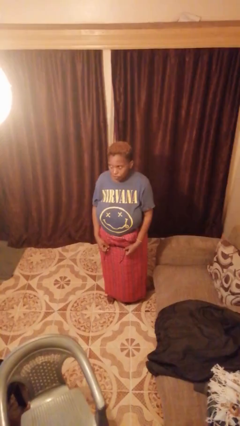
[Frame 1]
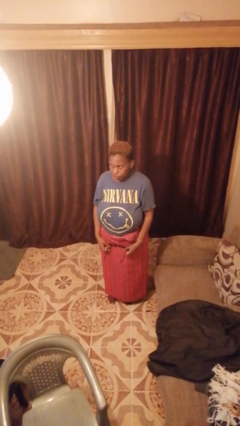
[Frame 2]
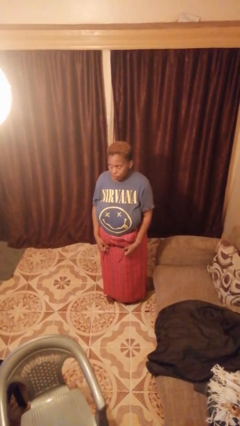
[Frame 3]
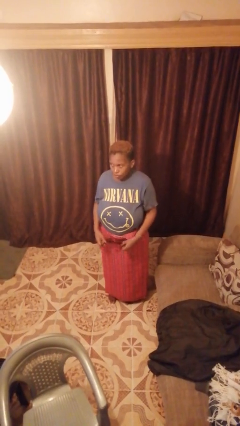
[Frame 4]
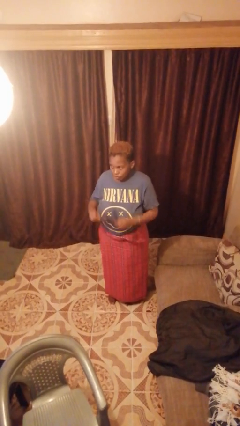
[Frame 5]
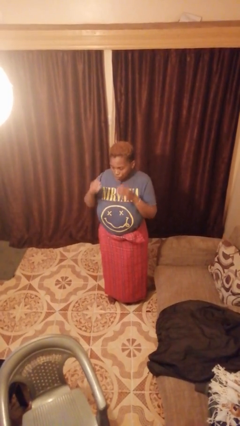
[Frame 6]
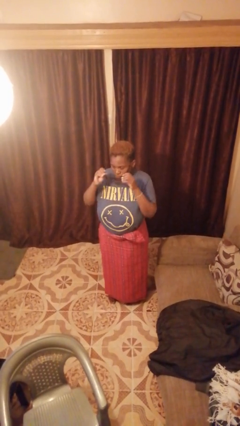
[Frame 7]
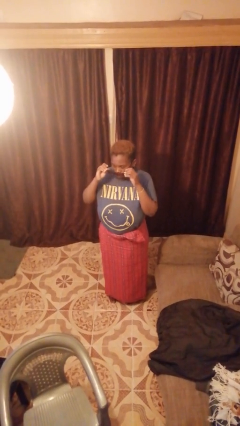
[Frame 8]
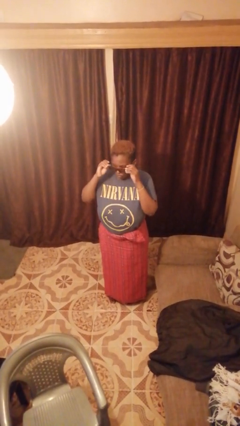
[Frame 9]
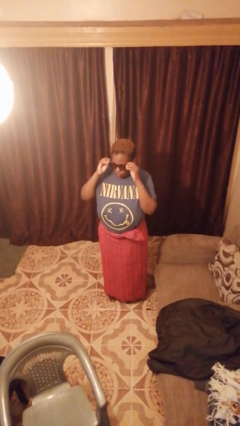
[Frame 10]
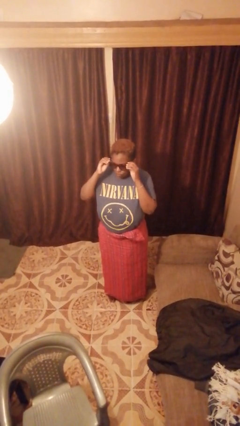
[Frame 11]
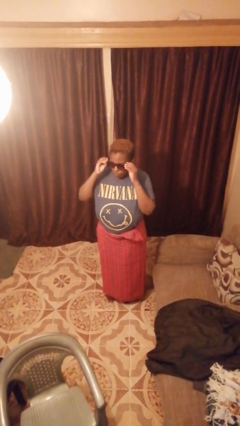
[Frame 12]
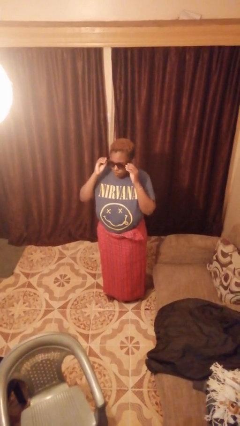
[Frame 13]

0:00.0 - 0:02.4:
person puts on sunglasses

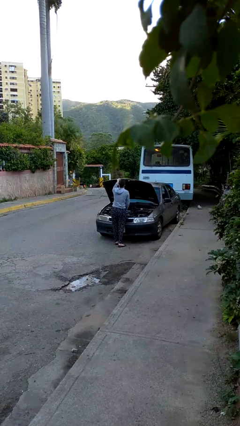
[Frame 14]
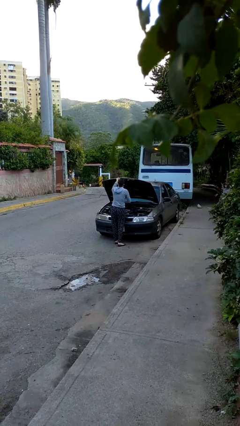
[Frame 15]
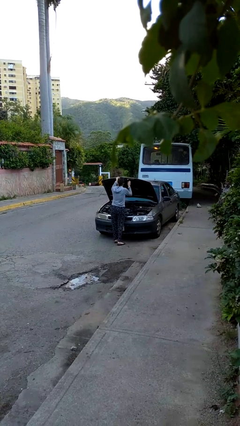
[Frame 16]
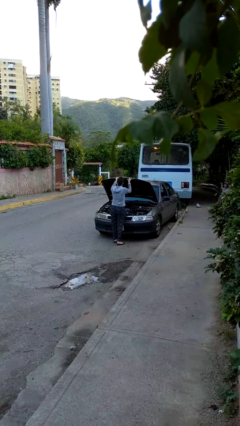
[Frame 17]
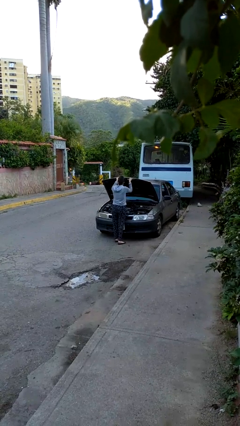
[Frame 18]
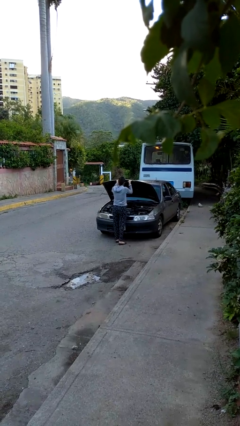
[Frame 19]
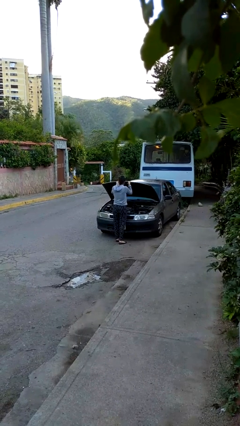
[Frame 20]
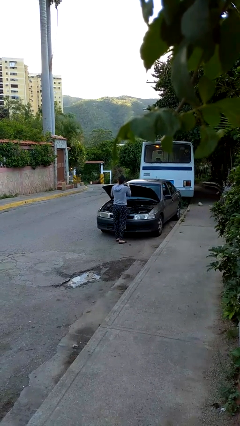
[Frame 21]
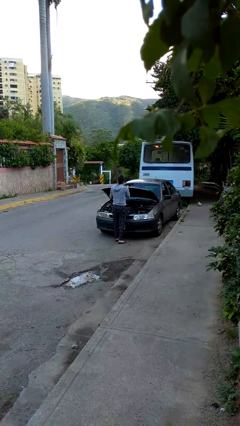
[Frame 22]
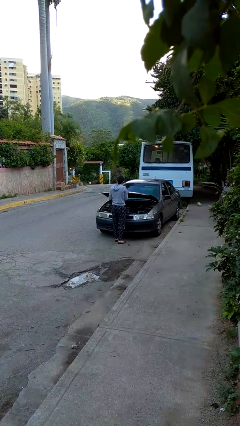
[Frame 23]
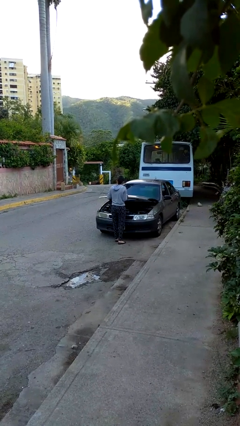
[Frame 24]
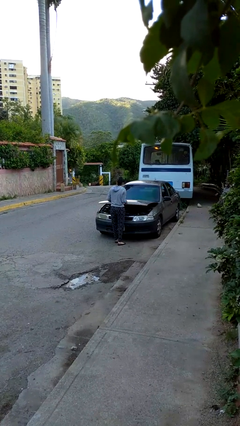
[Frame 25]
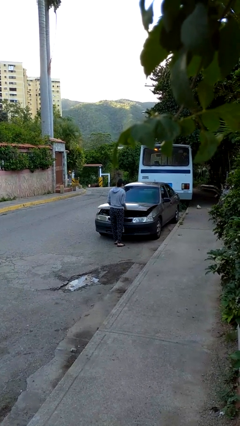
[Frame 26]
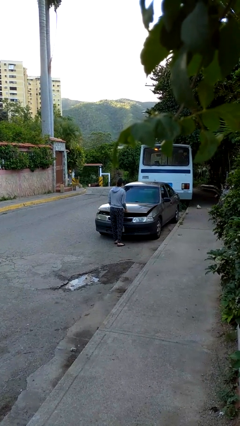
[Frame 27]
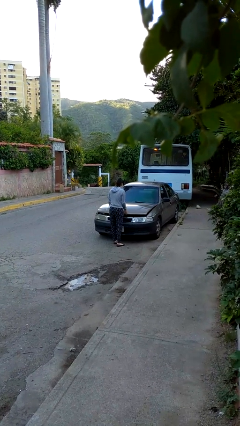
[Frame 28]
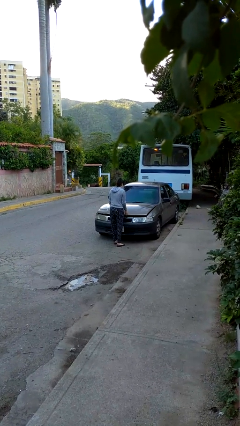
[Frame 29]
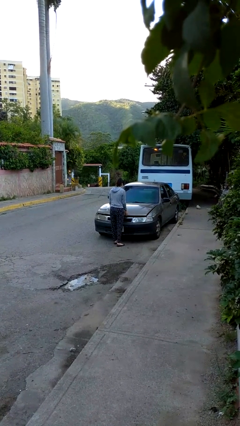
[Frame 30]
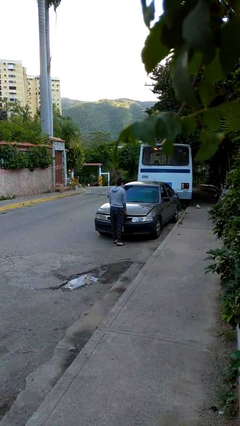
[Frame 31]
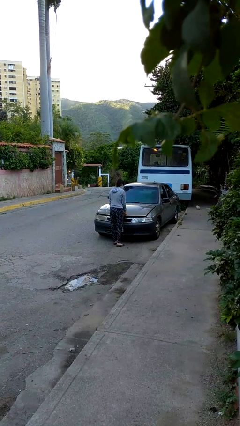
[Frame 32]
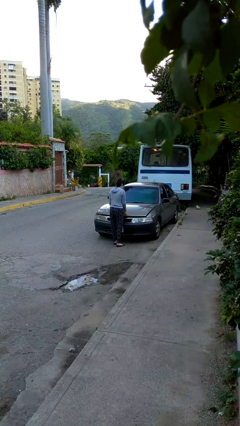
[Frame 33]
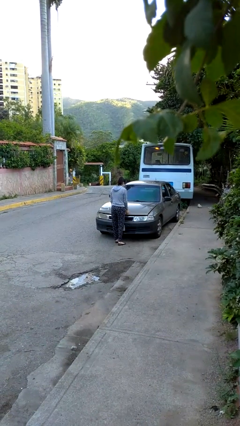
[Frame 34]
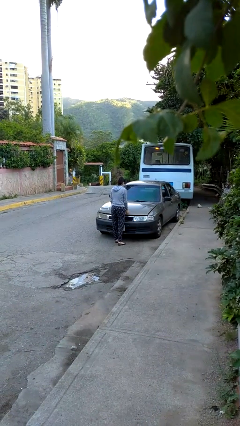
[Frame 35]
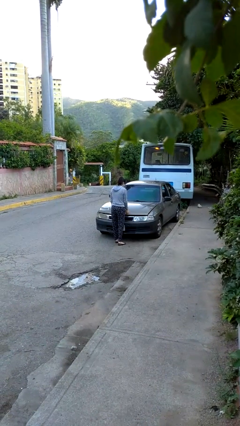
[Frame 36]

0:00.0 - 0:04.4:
person closes car hood

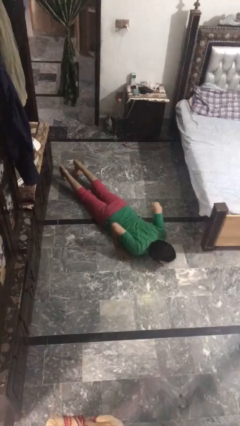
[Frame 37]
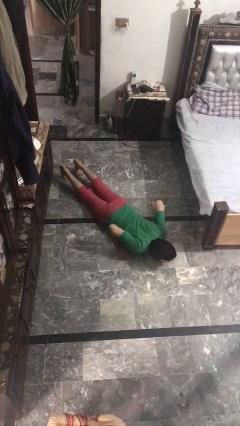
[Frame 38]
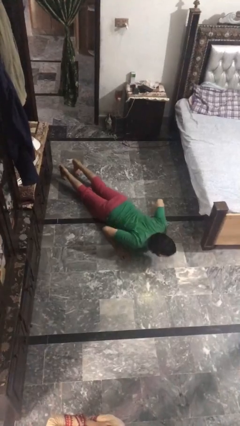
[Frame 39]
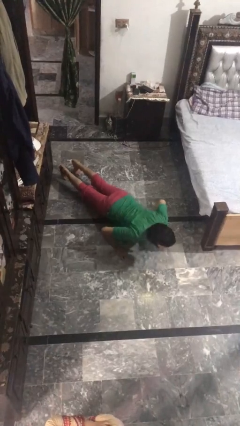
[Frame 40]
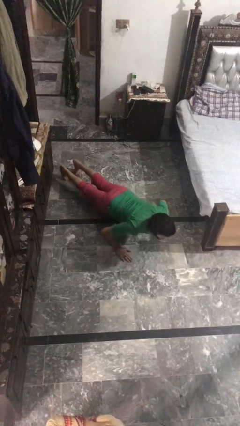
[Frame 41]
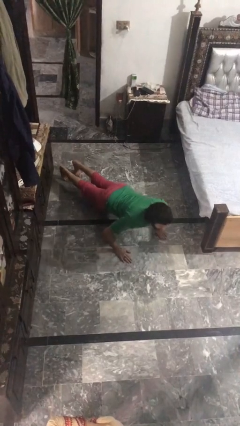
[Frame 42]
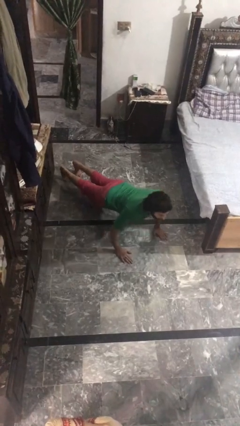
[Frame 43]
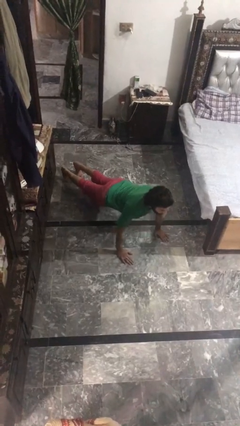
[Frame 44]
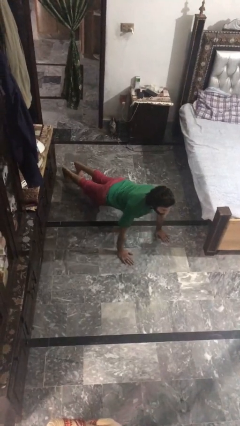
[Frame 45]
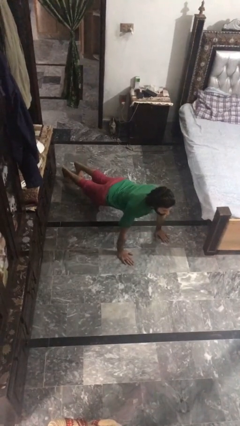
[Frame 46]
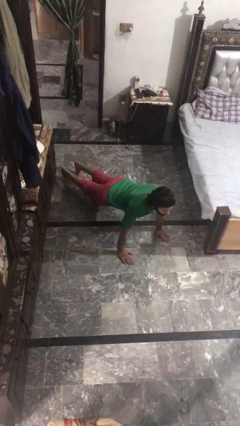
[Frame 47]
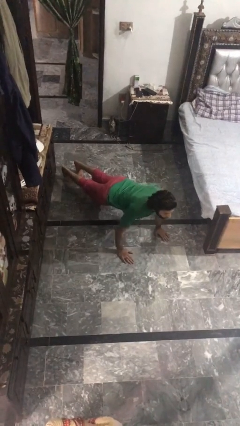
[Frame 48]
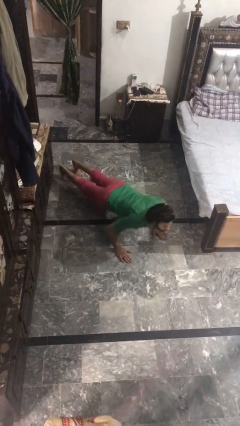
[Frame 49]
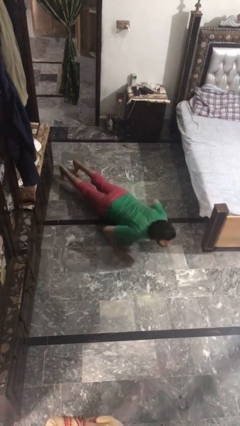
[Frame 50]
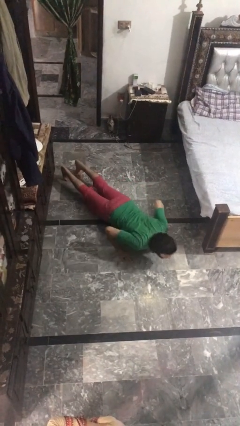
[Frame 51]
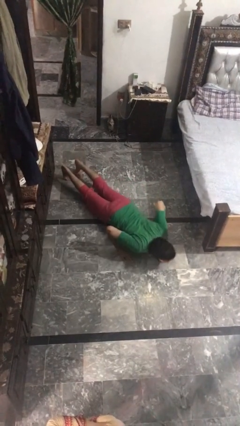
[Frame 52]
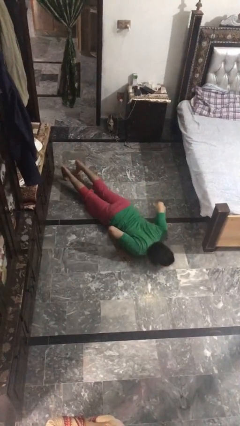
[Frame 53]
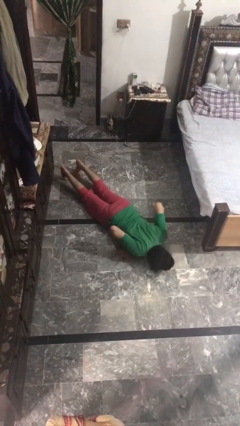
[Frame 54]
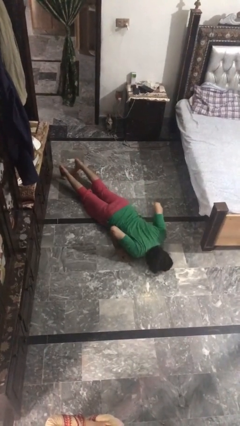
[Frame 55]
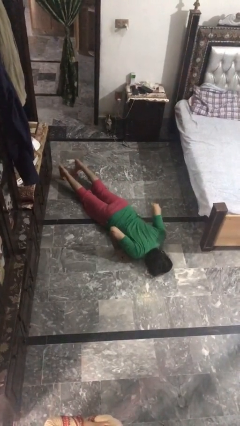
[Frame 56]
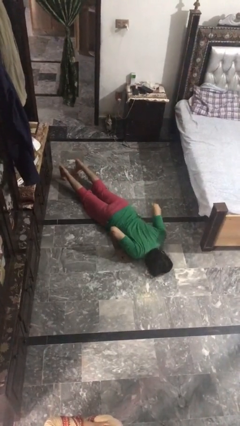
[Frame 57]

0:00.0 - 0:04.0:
person exercises with pushup

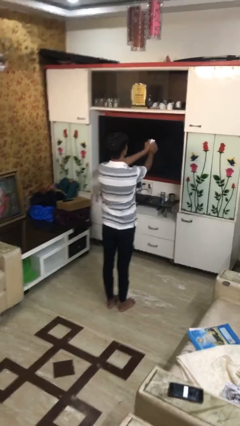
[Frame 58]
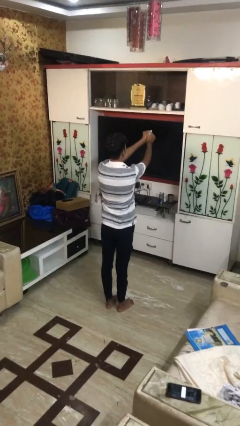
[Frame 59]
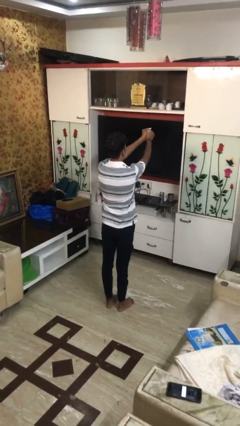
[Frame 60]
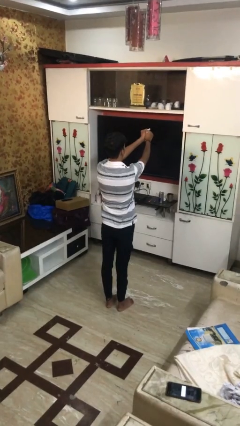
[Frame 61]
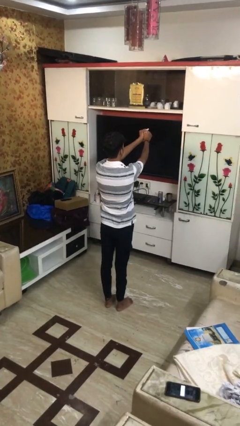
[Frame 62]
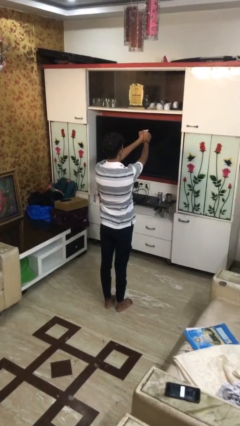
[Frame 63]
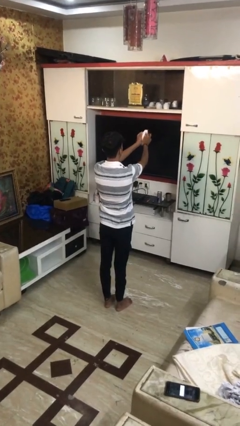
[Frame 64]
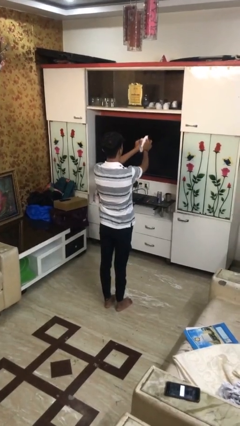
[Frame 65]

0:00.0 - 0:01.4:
person crumples paper

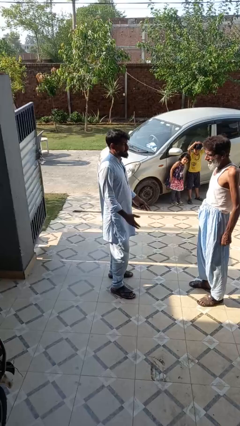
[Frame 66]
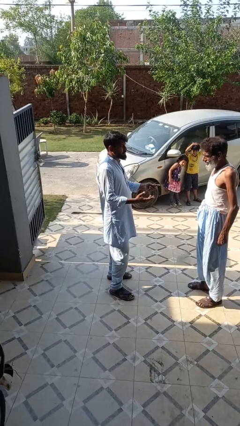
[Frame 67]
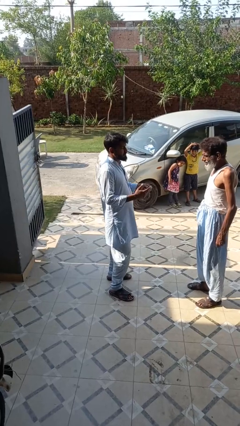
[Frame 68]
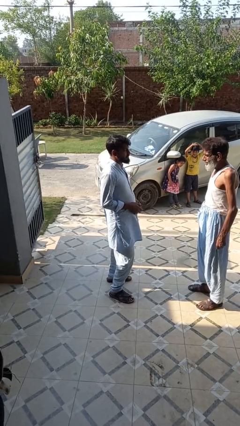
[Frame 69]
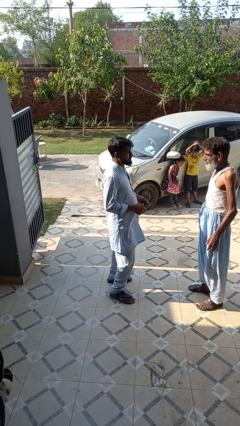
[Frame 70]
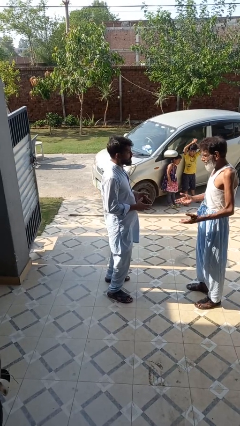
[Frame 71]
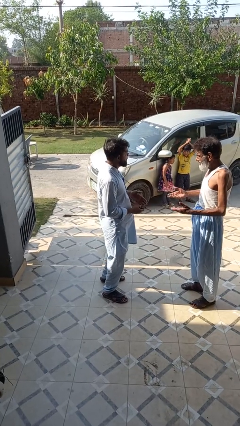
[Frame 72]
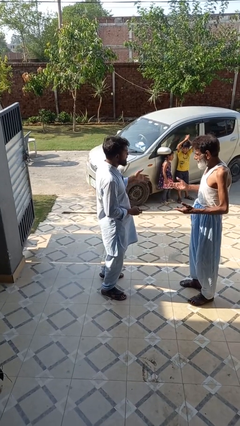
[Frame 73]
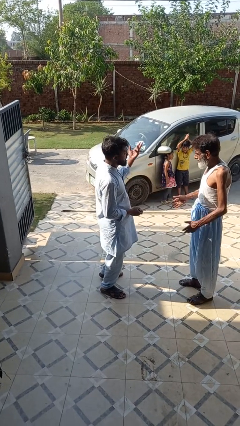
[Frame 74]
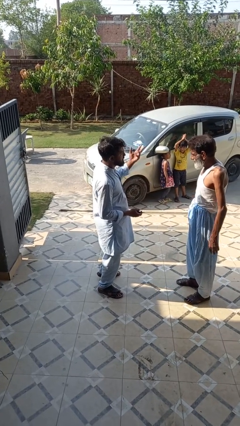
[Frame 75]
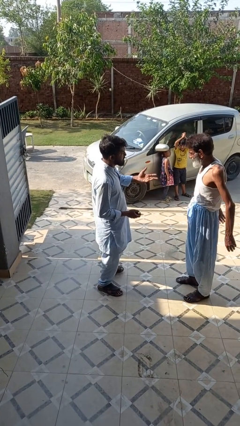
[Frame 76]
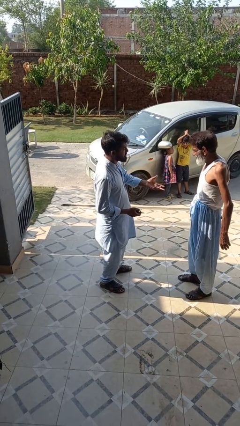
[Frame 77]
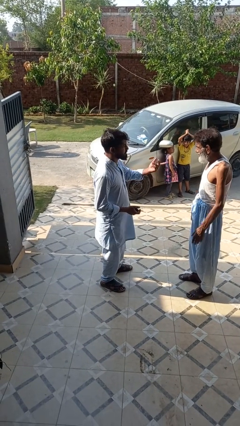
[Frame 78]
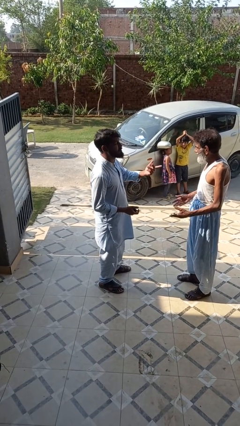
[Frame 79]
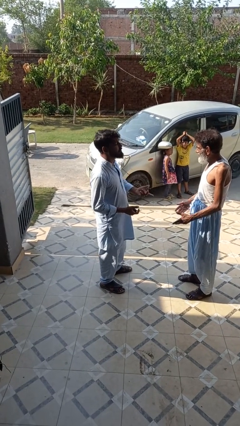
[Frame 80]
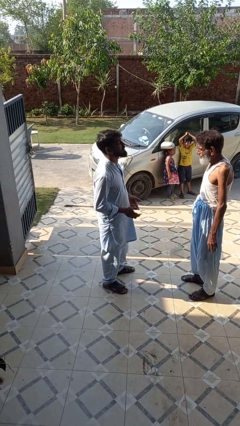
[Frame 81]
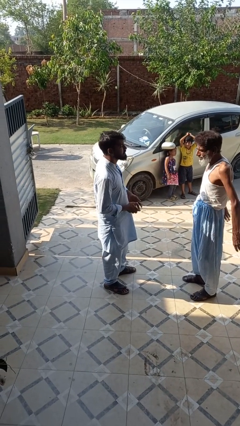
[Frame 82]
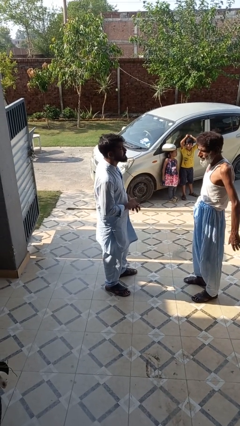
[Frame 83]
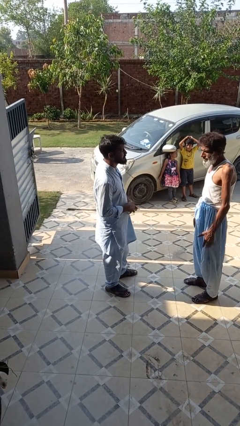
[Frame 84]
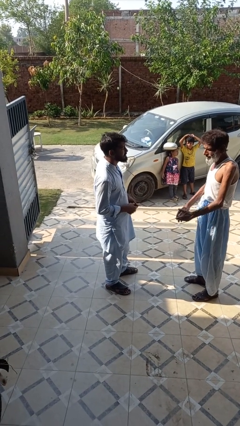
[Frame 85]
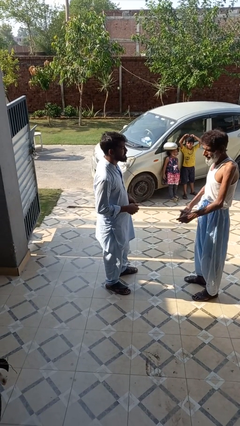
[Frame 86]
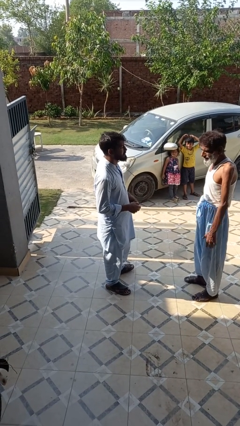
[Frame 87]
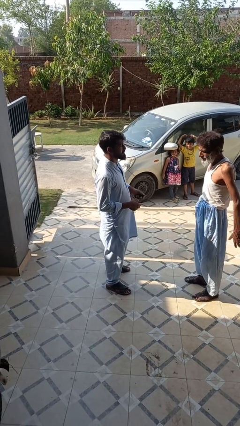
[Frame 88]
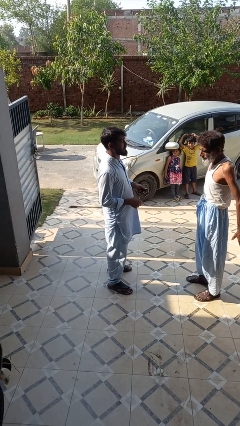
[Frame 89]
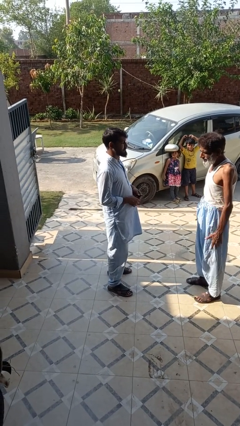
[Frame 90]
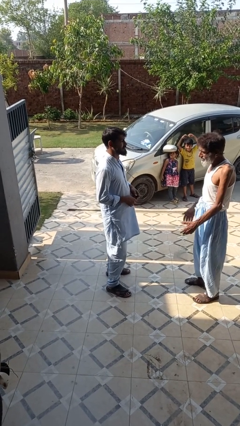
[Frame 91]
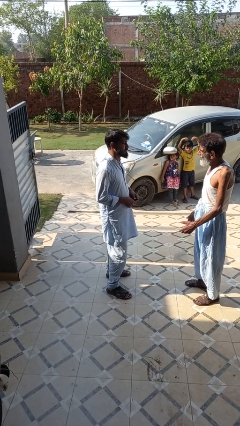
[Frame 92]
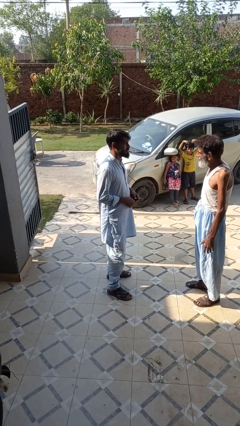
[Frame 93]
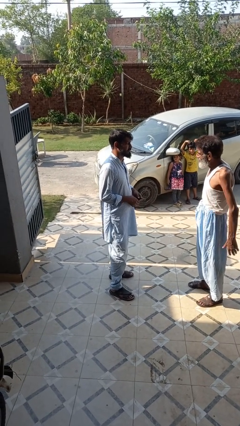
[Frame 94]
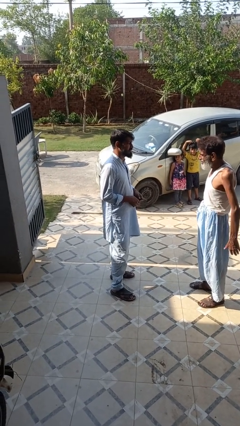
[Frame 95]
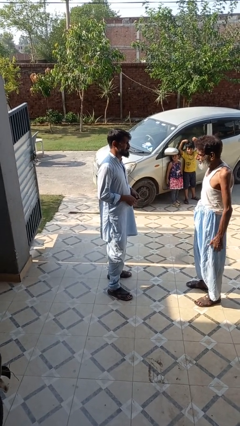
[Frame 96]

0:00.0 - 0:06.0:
person talks to person
